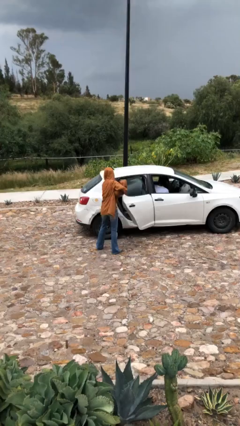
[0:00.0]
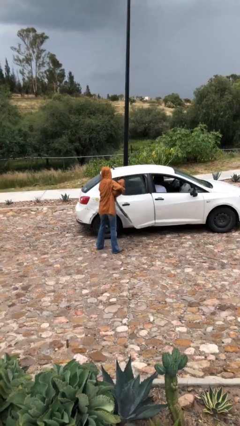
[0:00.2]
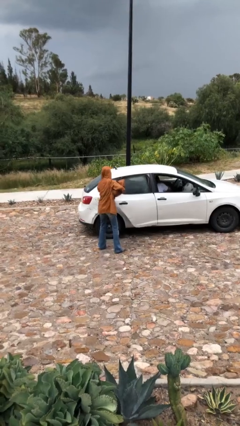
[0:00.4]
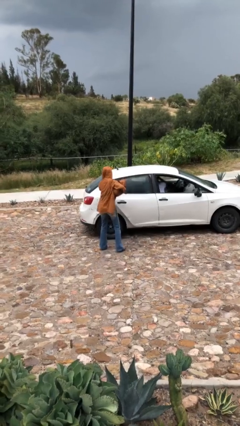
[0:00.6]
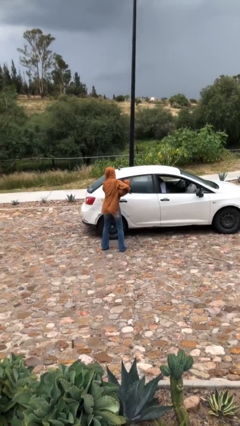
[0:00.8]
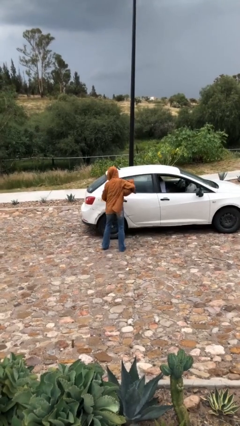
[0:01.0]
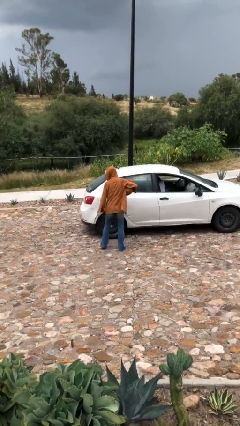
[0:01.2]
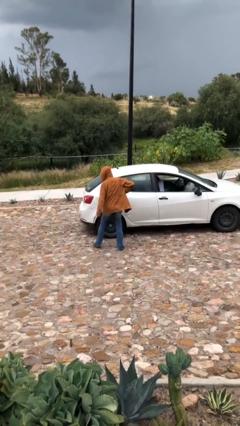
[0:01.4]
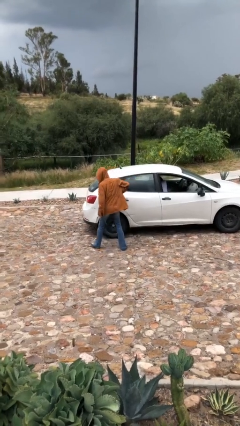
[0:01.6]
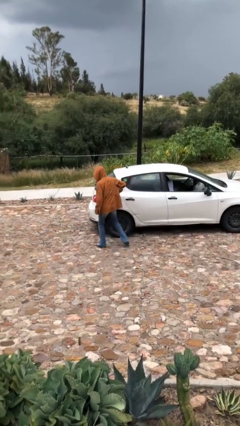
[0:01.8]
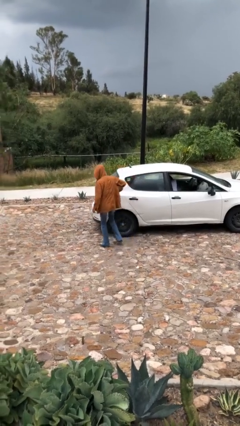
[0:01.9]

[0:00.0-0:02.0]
person closes car door

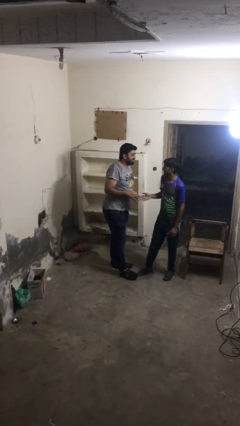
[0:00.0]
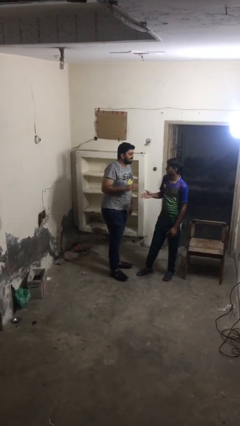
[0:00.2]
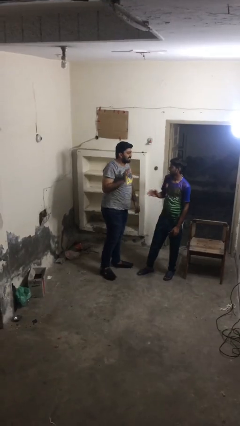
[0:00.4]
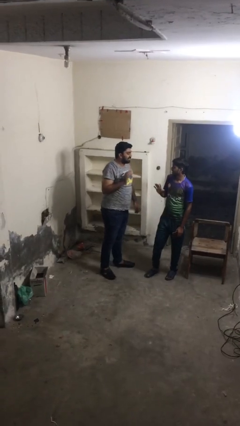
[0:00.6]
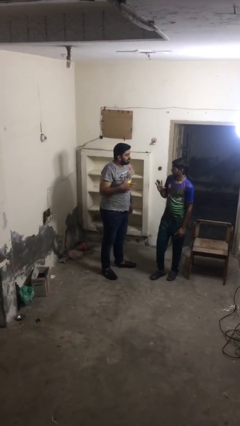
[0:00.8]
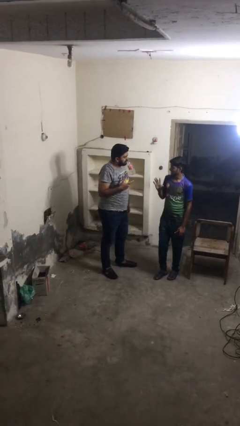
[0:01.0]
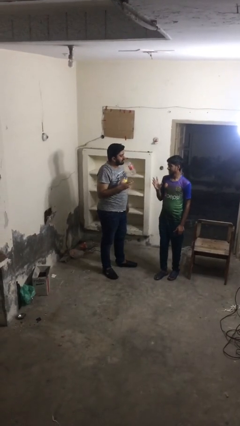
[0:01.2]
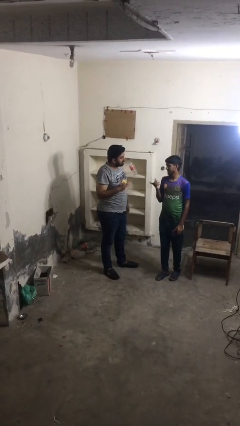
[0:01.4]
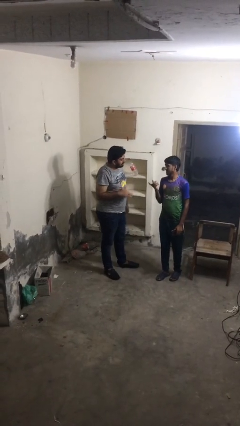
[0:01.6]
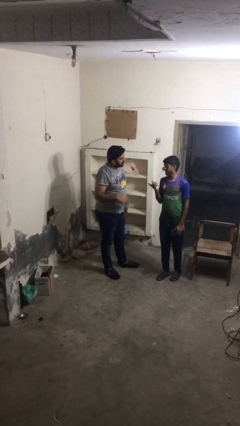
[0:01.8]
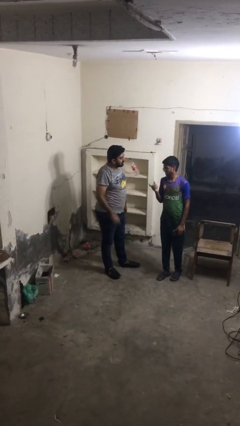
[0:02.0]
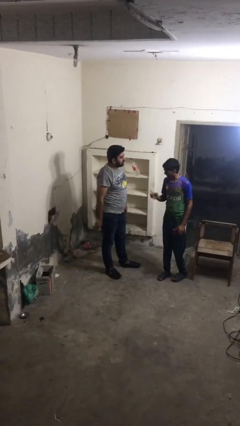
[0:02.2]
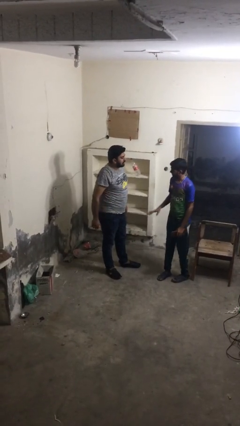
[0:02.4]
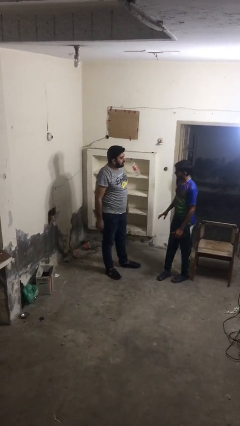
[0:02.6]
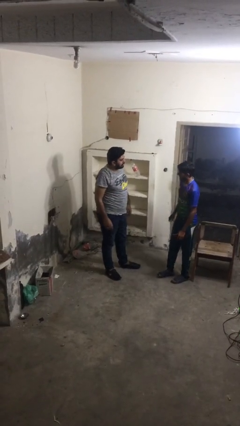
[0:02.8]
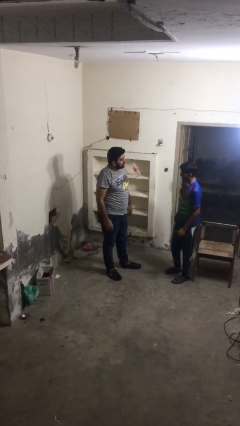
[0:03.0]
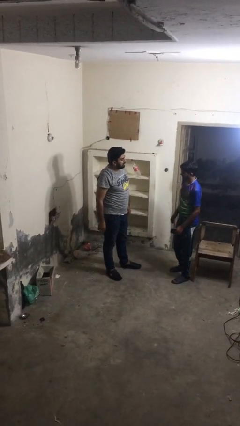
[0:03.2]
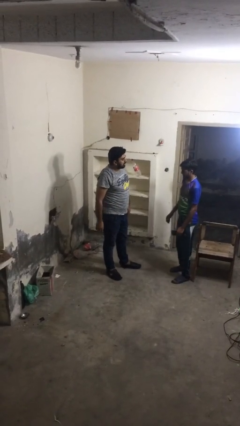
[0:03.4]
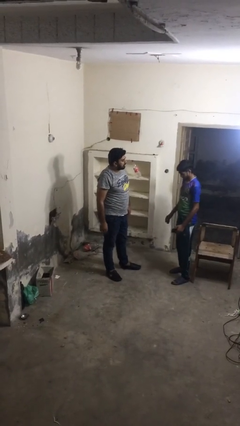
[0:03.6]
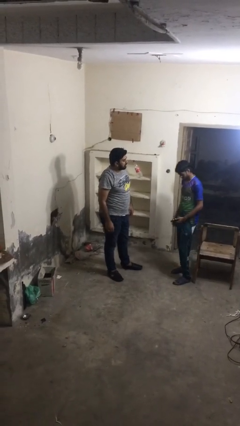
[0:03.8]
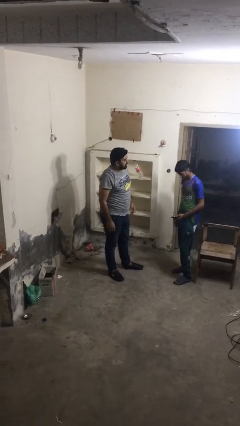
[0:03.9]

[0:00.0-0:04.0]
person talks to person

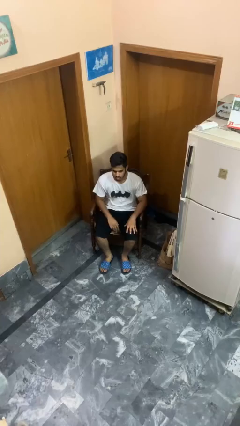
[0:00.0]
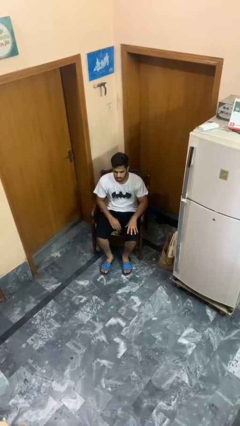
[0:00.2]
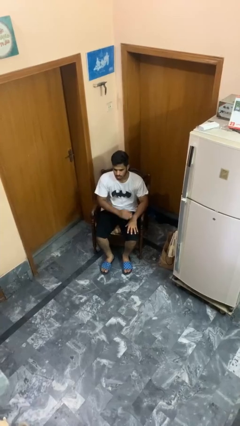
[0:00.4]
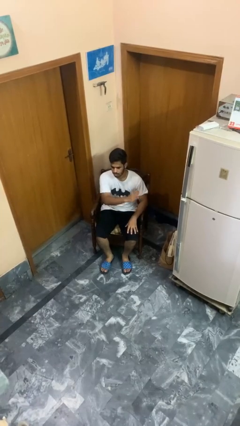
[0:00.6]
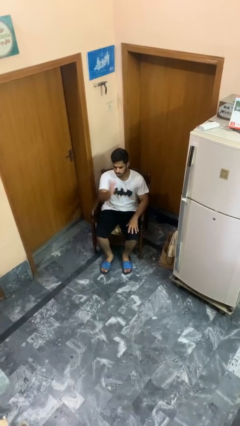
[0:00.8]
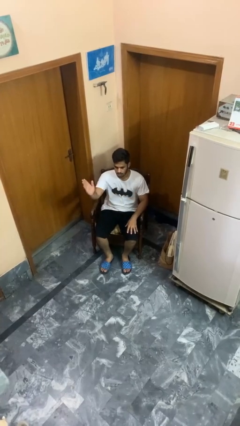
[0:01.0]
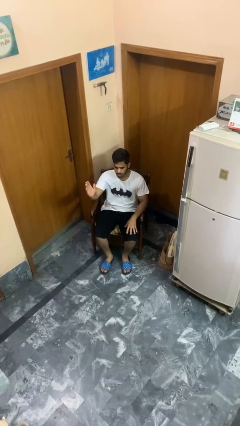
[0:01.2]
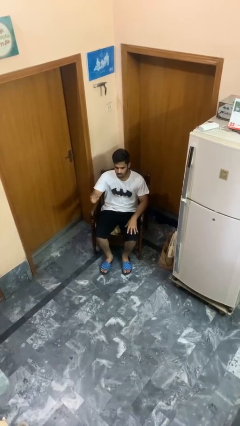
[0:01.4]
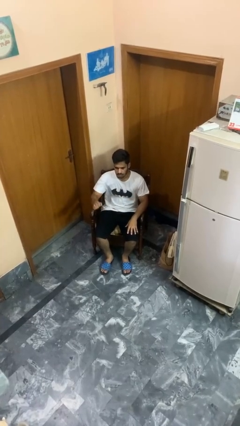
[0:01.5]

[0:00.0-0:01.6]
person gestures swipe right

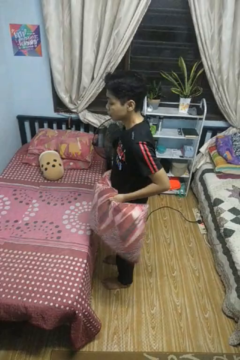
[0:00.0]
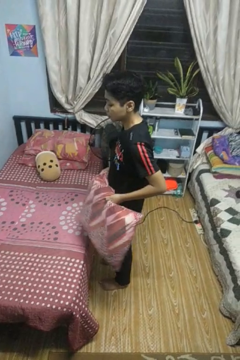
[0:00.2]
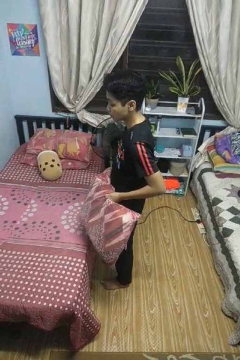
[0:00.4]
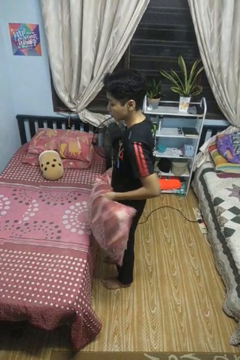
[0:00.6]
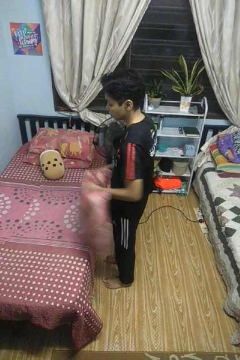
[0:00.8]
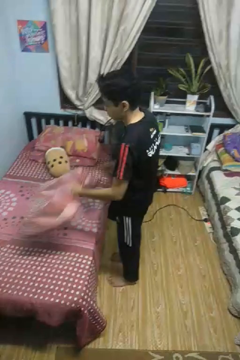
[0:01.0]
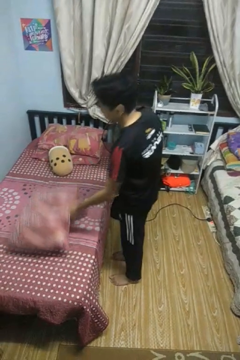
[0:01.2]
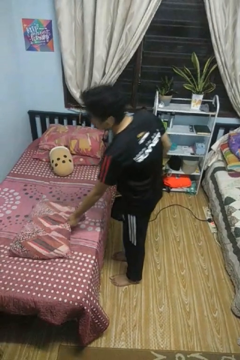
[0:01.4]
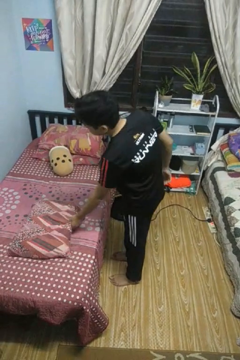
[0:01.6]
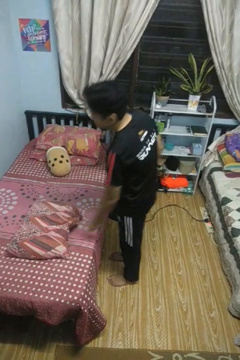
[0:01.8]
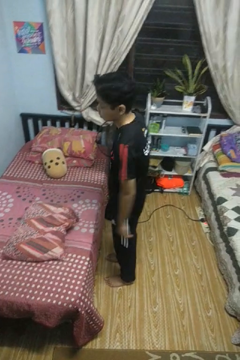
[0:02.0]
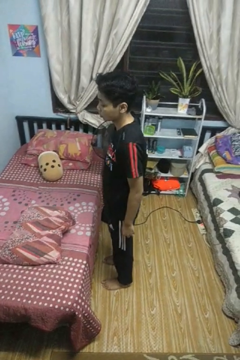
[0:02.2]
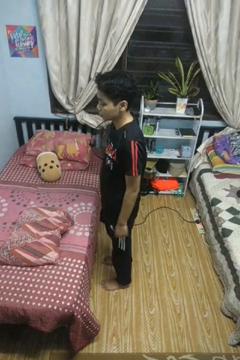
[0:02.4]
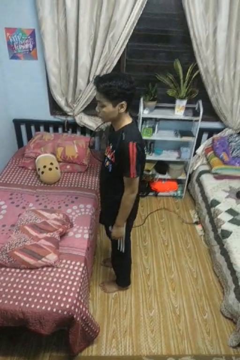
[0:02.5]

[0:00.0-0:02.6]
person puts down object on bed

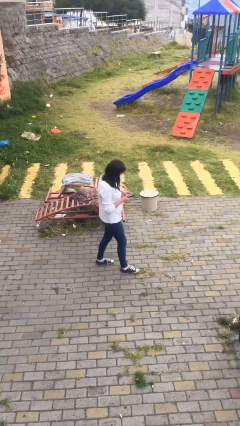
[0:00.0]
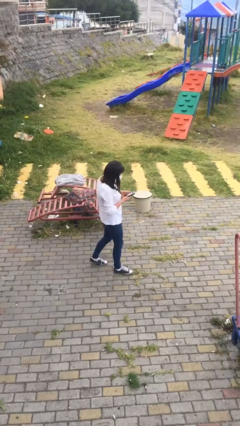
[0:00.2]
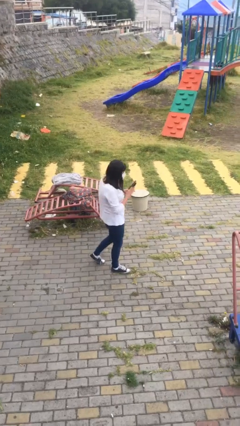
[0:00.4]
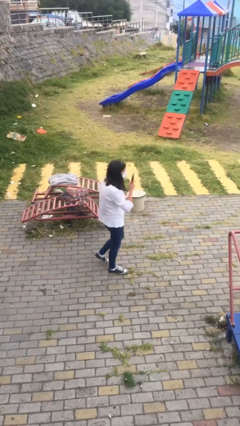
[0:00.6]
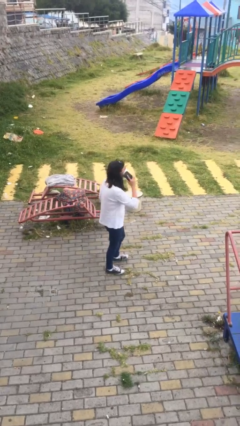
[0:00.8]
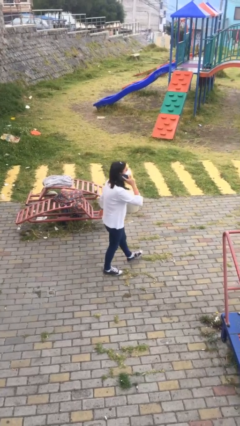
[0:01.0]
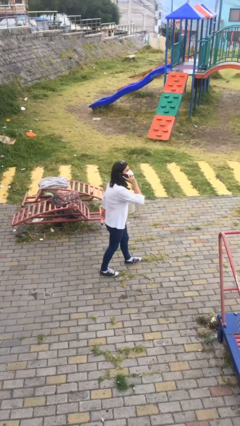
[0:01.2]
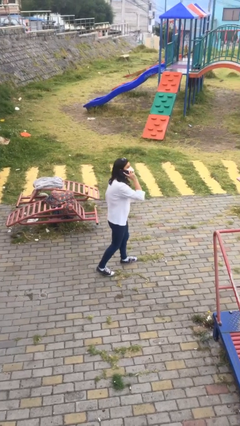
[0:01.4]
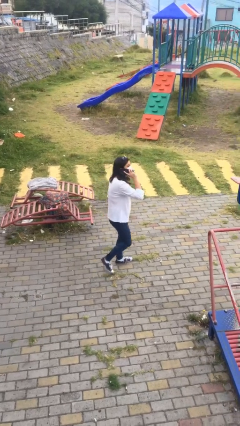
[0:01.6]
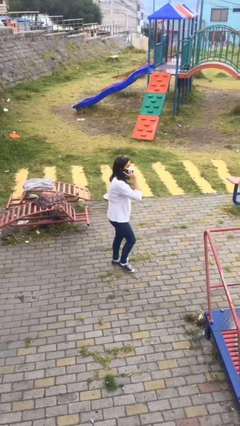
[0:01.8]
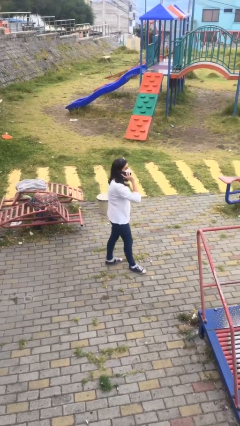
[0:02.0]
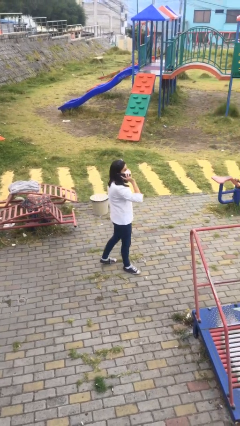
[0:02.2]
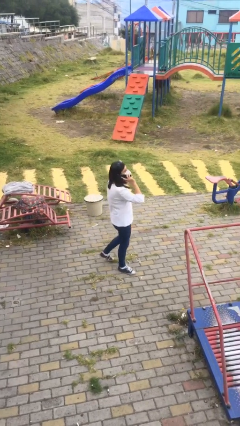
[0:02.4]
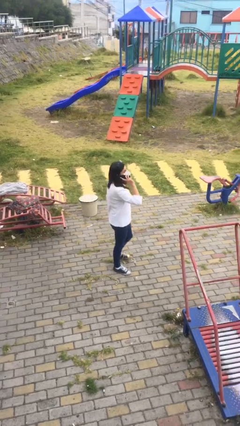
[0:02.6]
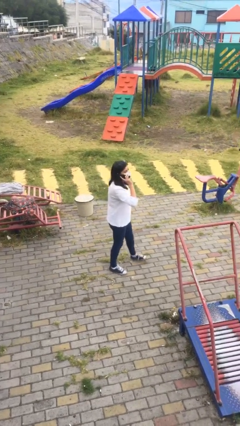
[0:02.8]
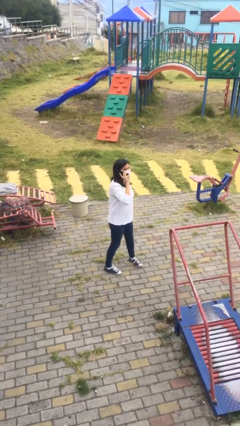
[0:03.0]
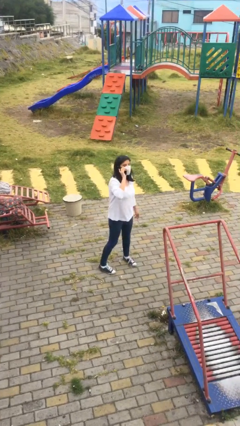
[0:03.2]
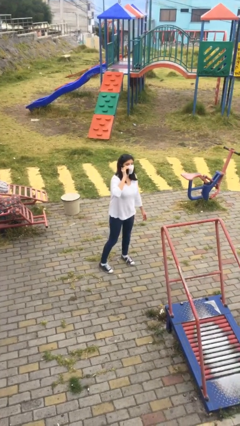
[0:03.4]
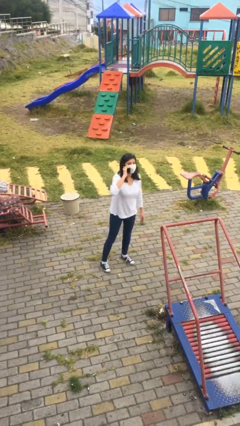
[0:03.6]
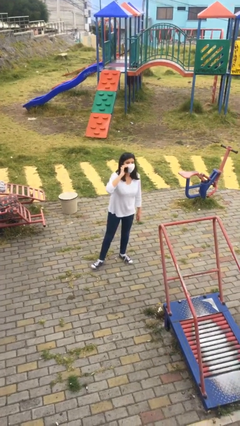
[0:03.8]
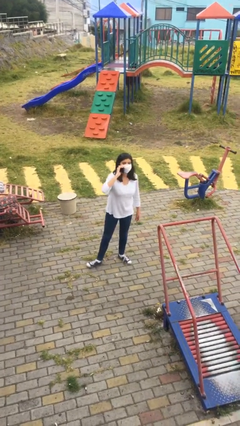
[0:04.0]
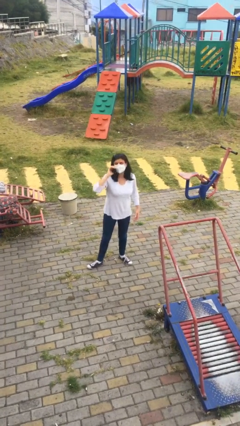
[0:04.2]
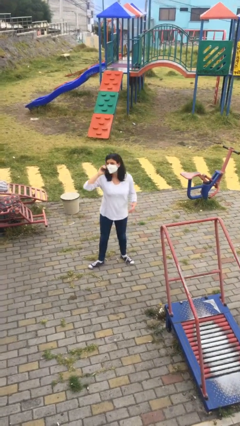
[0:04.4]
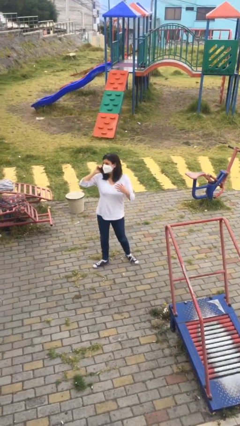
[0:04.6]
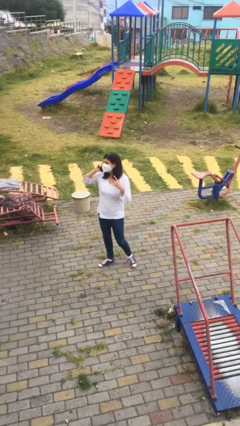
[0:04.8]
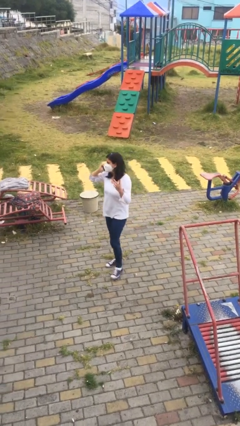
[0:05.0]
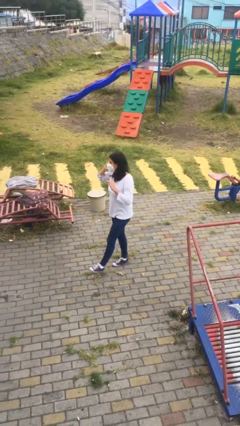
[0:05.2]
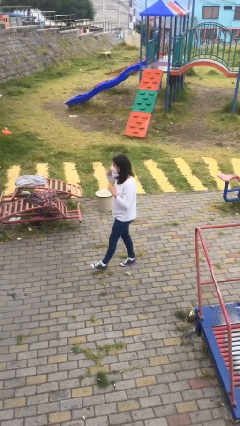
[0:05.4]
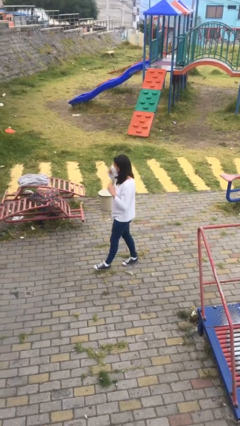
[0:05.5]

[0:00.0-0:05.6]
person talks on phone

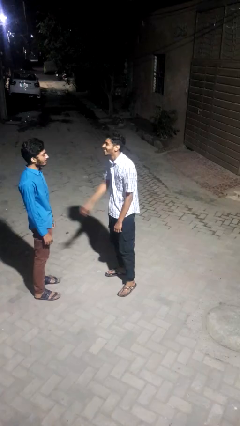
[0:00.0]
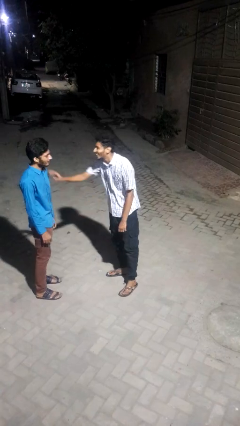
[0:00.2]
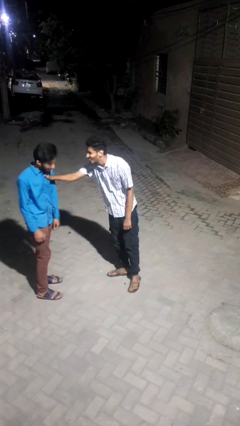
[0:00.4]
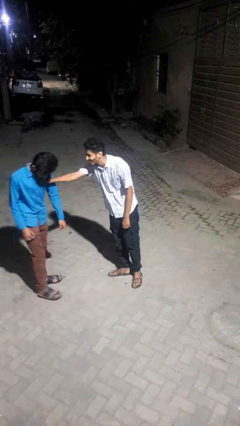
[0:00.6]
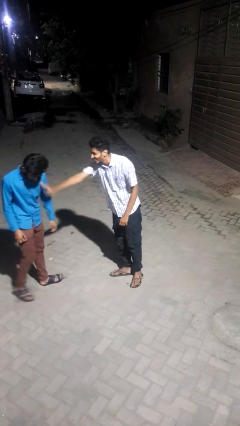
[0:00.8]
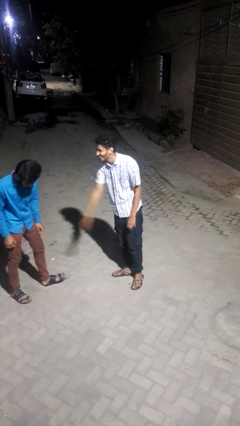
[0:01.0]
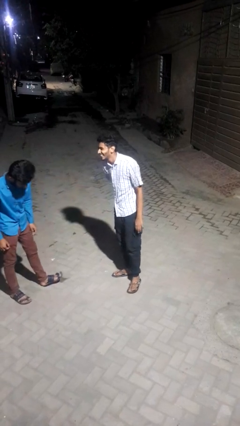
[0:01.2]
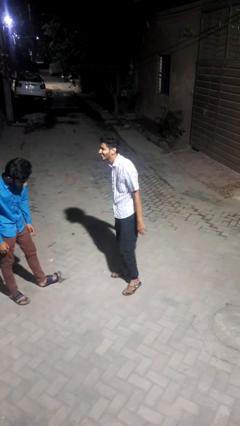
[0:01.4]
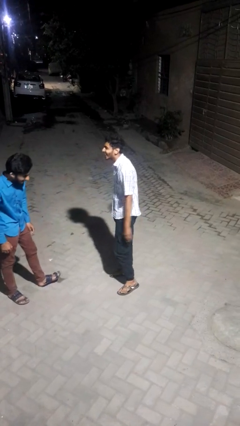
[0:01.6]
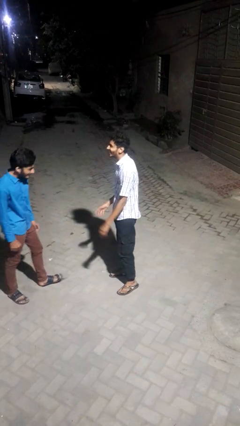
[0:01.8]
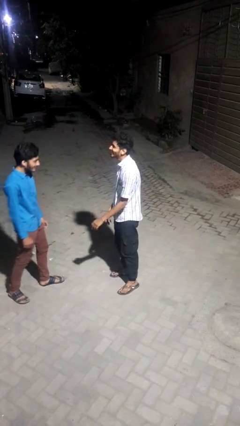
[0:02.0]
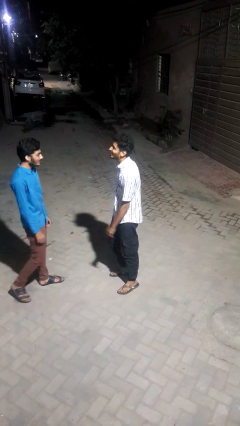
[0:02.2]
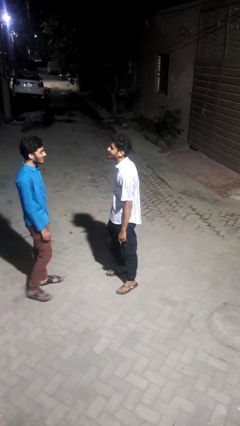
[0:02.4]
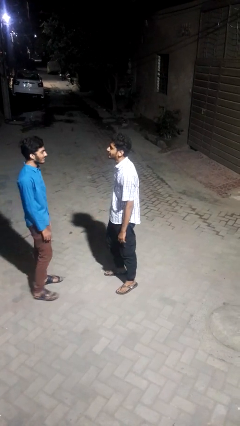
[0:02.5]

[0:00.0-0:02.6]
person shoves person
